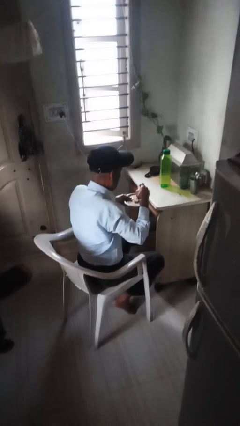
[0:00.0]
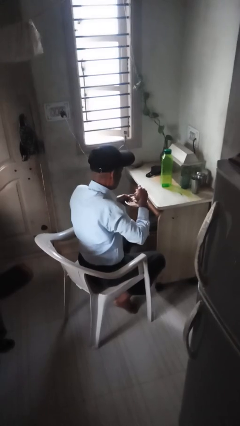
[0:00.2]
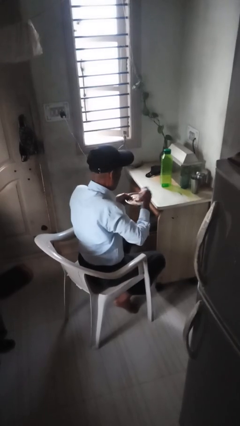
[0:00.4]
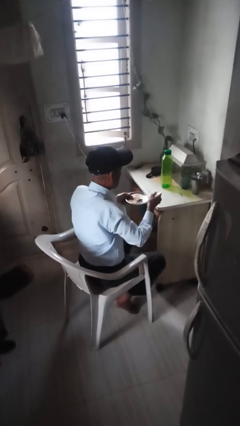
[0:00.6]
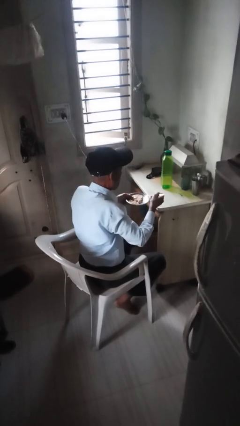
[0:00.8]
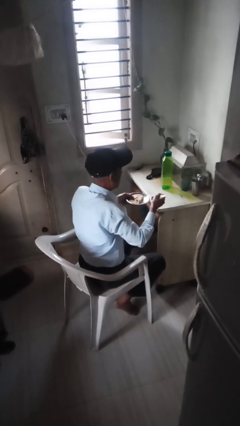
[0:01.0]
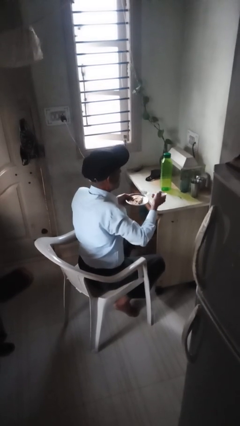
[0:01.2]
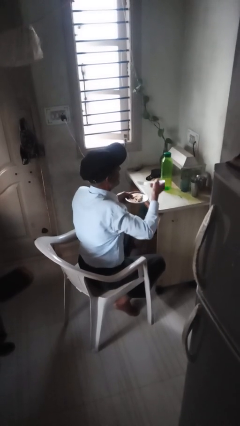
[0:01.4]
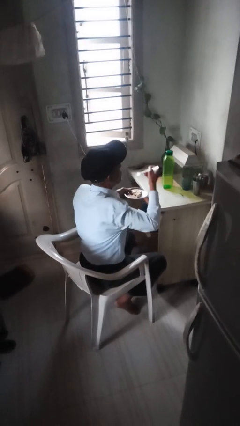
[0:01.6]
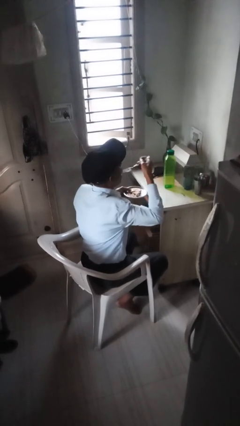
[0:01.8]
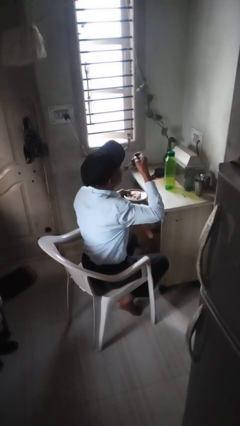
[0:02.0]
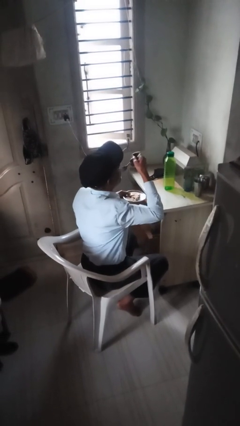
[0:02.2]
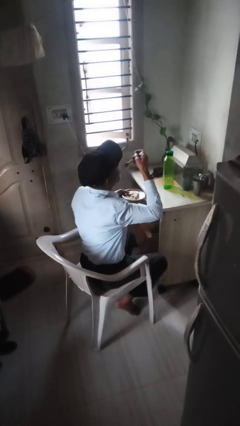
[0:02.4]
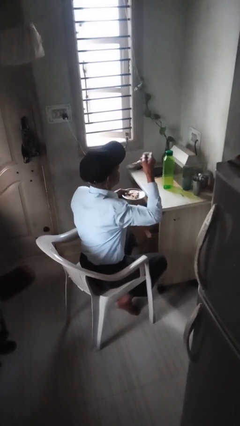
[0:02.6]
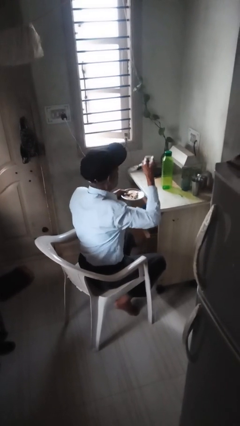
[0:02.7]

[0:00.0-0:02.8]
person eats with utensil

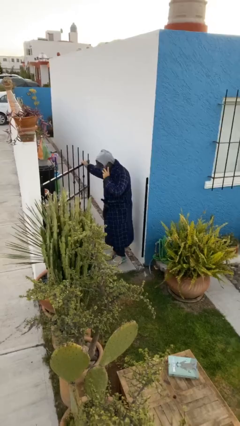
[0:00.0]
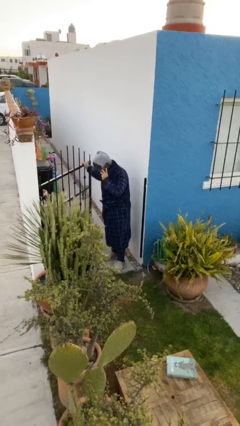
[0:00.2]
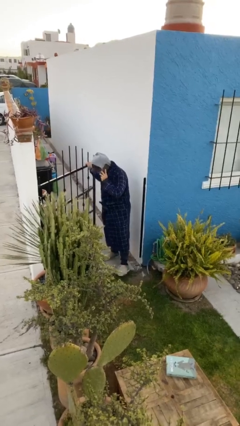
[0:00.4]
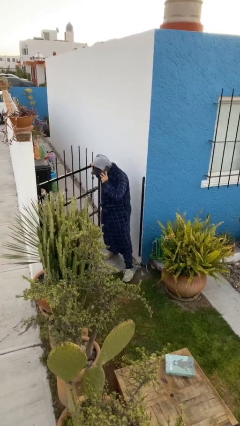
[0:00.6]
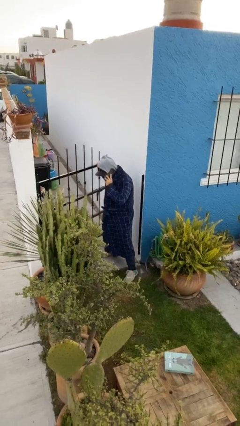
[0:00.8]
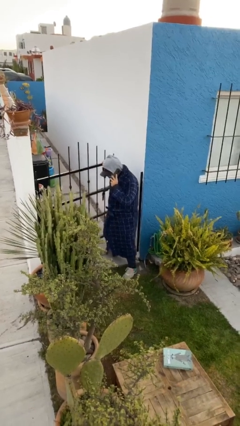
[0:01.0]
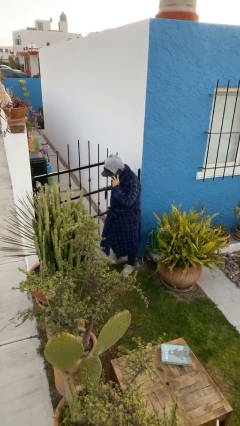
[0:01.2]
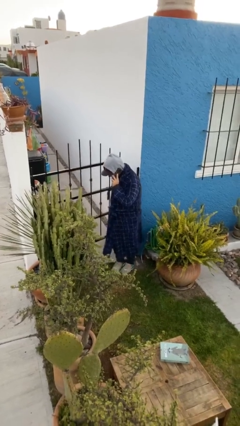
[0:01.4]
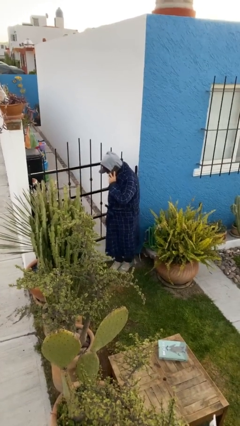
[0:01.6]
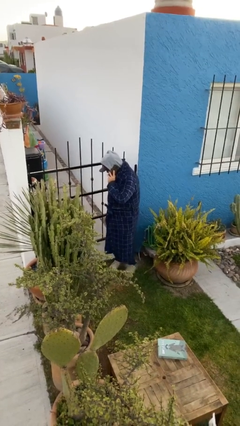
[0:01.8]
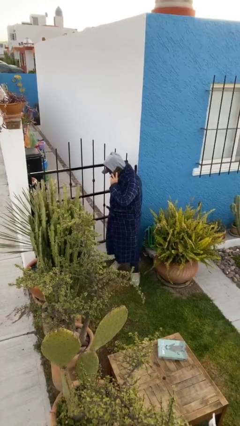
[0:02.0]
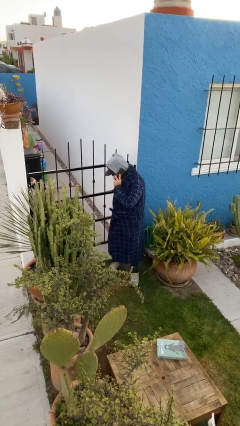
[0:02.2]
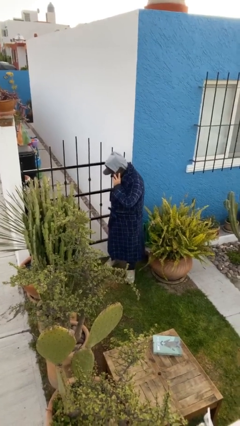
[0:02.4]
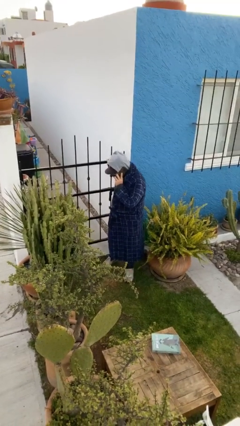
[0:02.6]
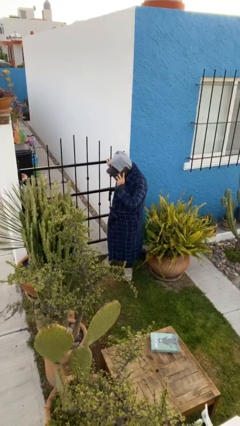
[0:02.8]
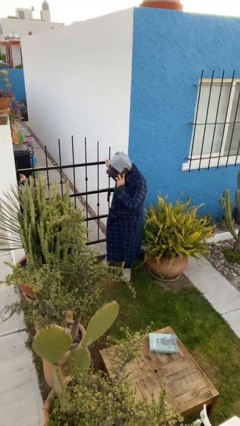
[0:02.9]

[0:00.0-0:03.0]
person closes facility door

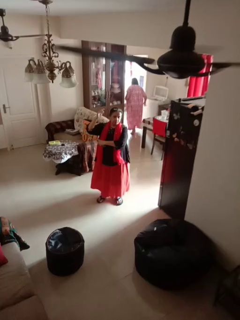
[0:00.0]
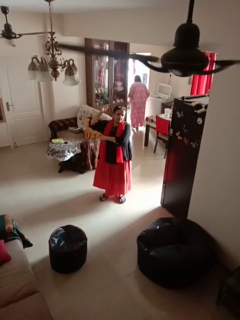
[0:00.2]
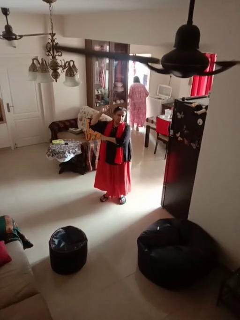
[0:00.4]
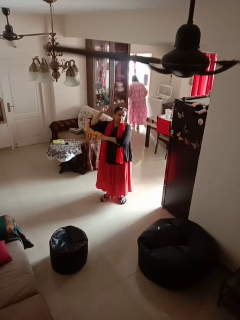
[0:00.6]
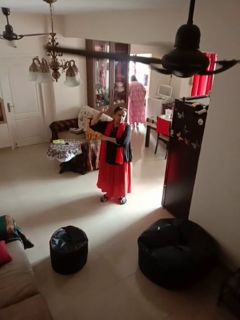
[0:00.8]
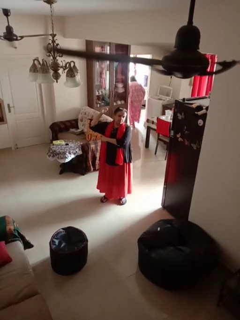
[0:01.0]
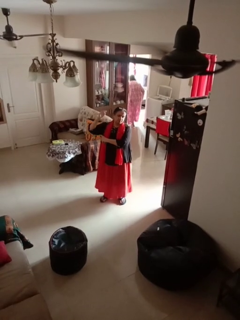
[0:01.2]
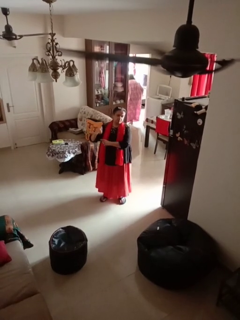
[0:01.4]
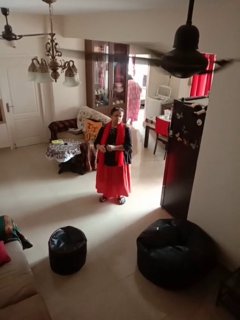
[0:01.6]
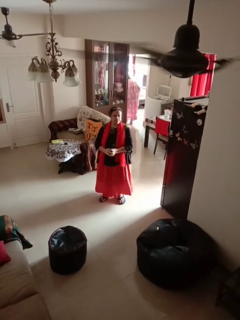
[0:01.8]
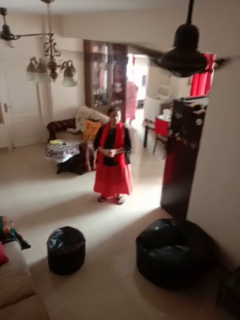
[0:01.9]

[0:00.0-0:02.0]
person applies deodorant

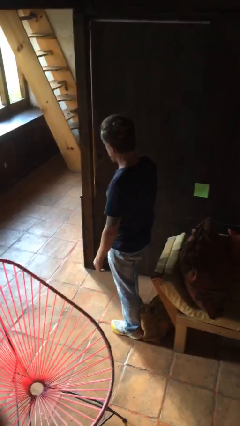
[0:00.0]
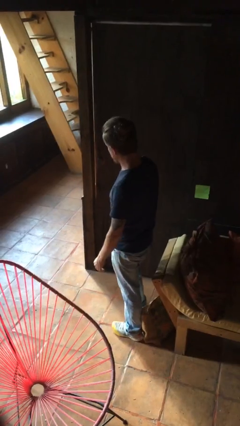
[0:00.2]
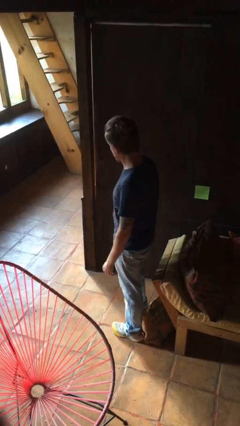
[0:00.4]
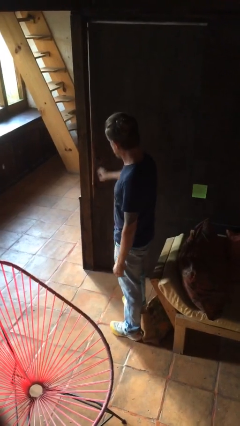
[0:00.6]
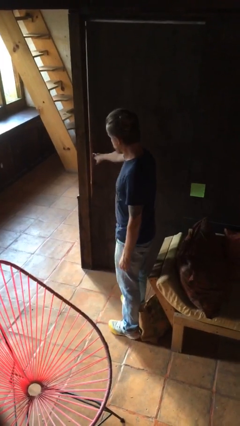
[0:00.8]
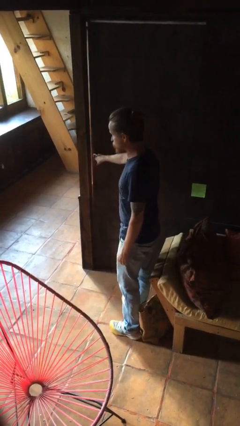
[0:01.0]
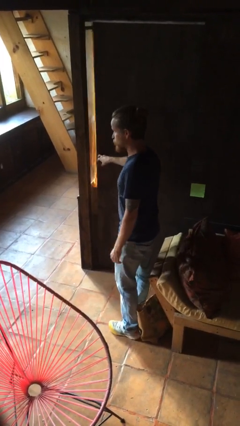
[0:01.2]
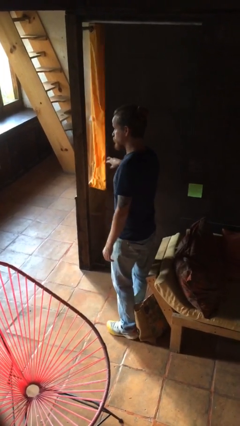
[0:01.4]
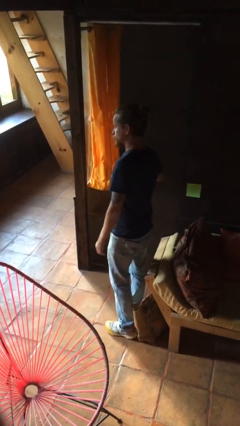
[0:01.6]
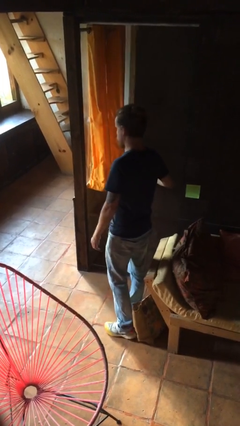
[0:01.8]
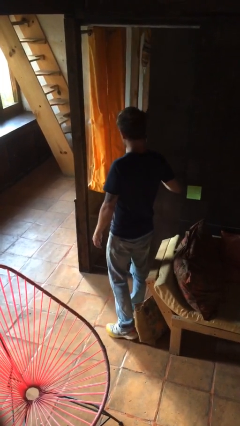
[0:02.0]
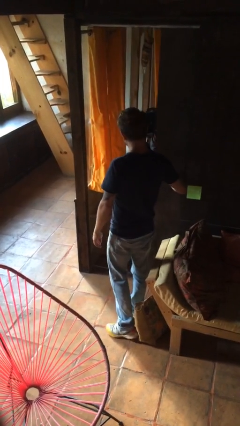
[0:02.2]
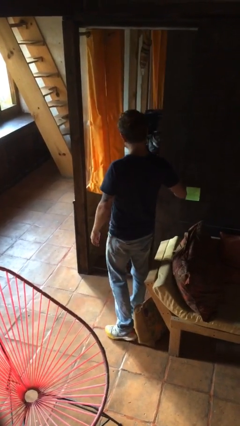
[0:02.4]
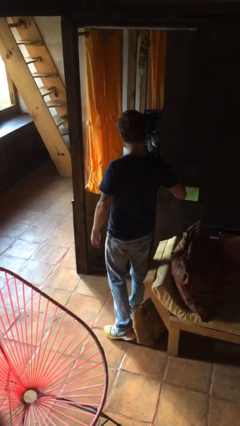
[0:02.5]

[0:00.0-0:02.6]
person opens sliding door

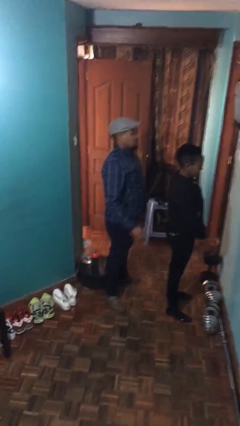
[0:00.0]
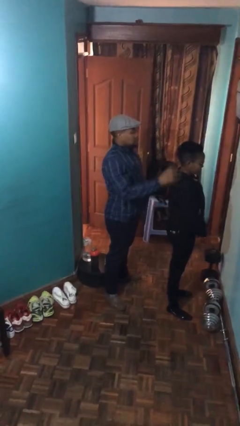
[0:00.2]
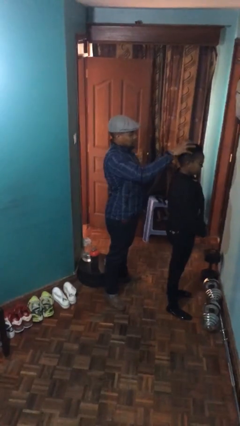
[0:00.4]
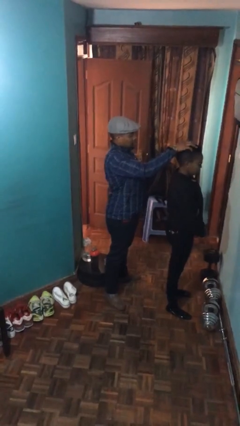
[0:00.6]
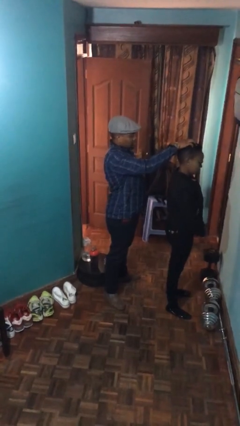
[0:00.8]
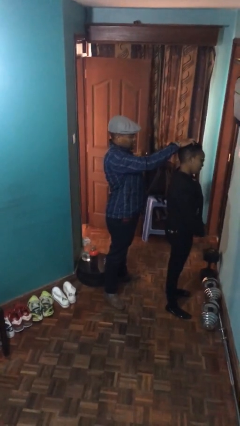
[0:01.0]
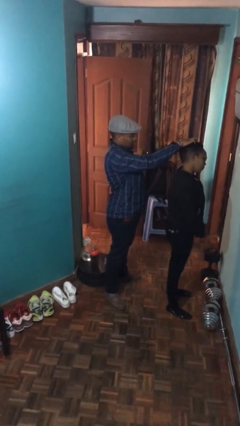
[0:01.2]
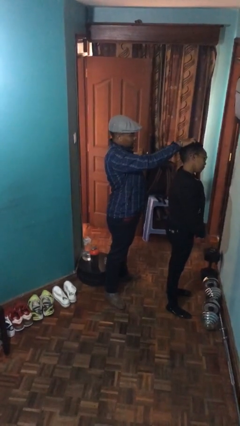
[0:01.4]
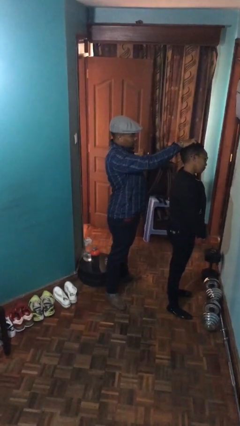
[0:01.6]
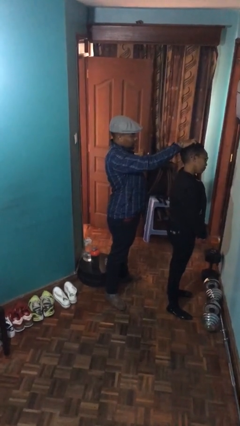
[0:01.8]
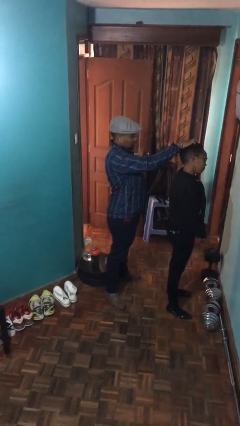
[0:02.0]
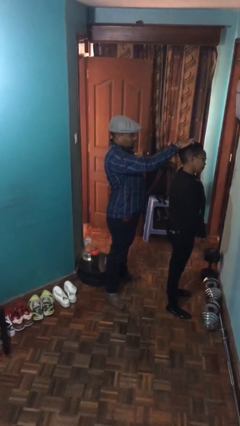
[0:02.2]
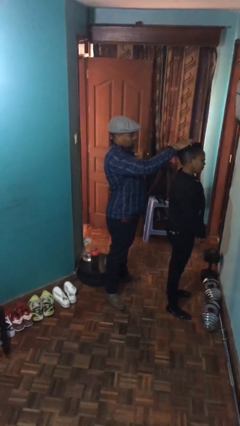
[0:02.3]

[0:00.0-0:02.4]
person grabs person by hair

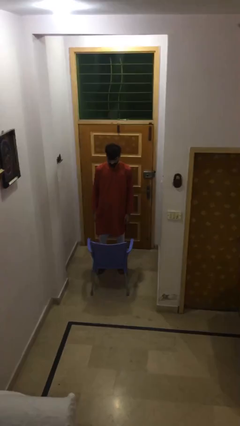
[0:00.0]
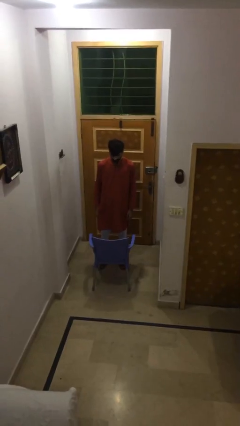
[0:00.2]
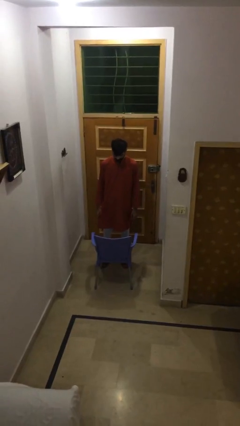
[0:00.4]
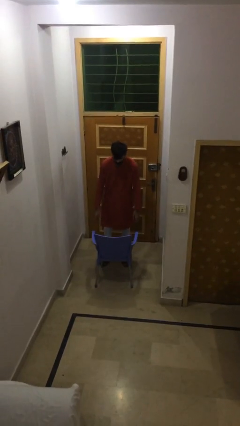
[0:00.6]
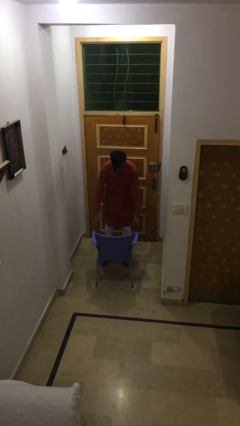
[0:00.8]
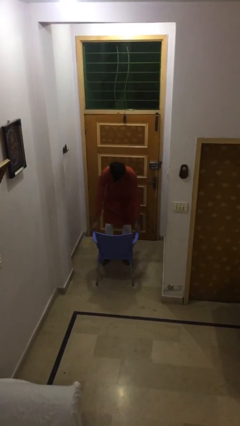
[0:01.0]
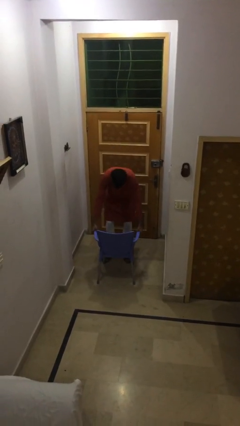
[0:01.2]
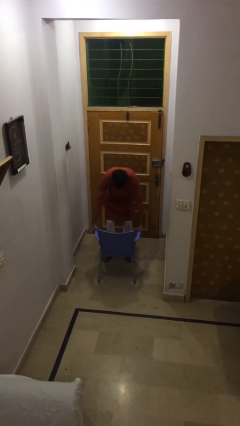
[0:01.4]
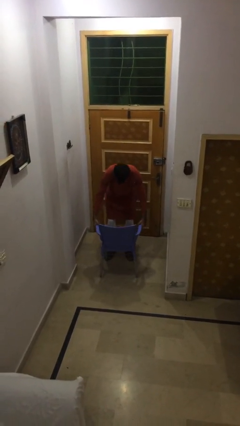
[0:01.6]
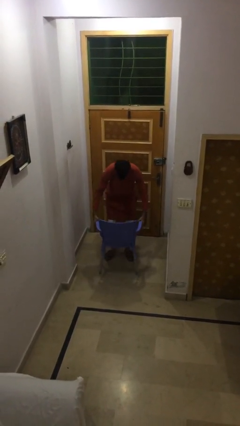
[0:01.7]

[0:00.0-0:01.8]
person picks up object from floor

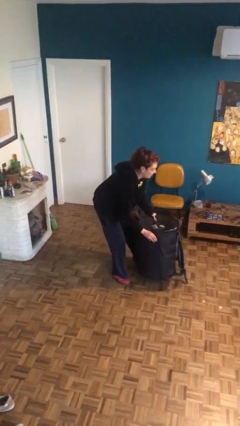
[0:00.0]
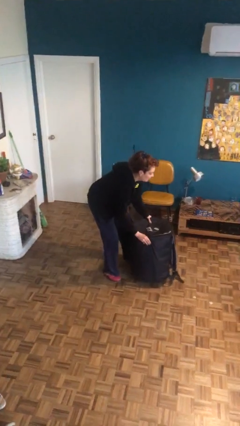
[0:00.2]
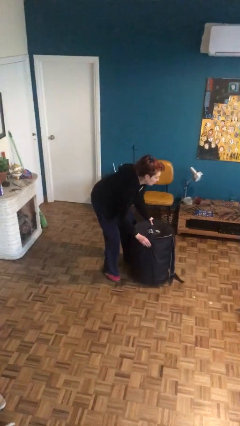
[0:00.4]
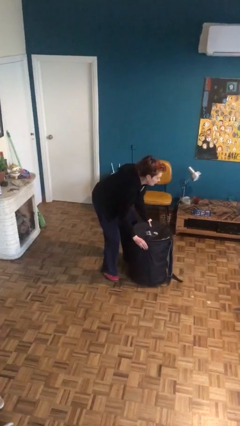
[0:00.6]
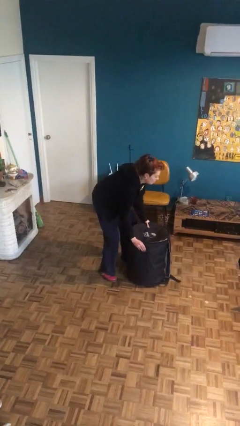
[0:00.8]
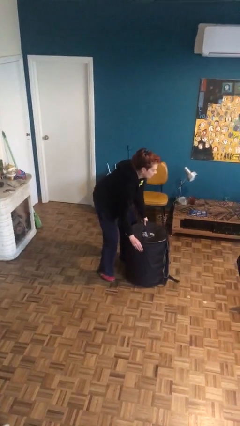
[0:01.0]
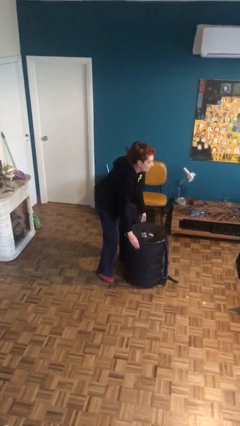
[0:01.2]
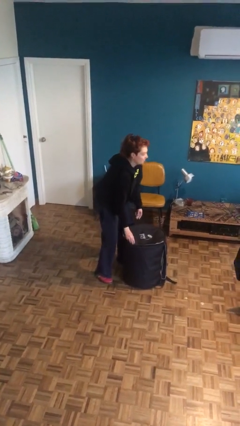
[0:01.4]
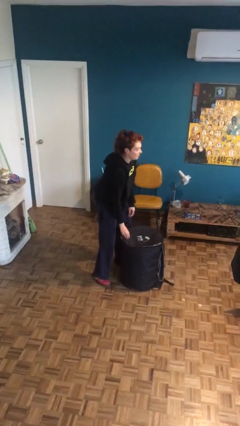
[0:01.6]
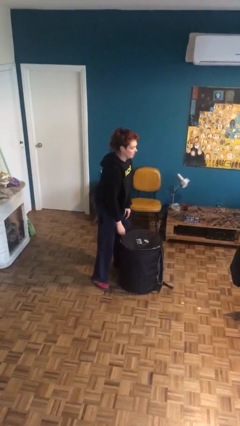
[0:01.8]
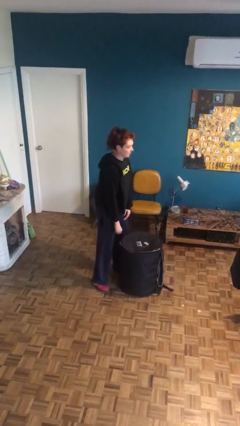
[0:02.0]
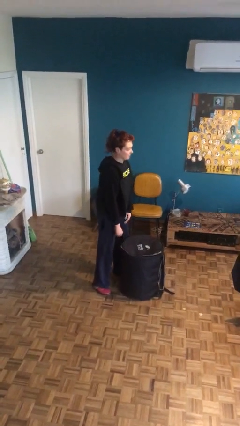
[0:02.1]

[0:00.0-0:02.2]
person puts down object on floor
